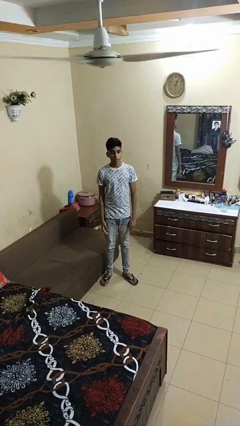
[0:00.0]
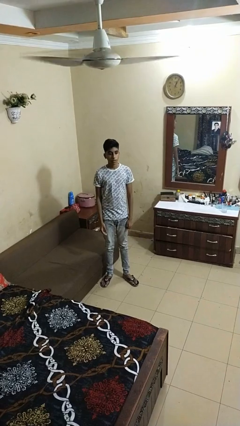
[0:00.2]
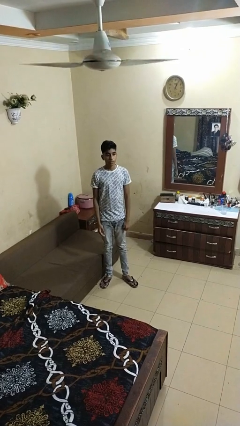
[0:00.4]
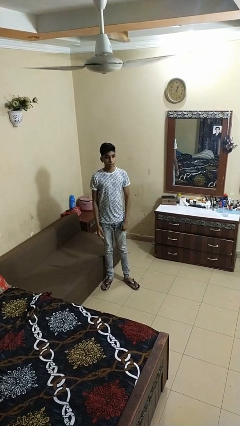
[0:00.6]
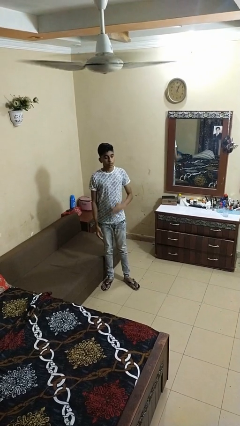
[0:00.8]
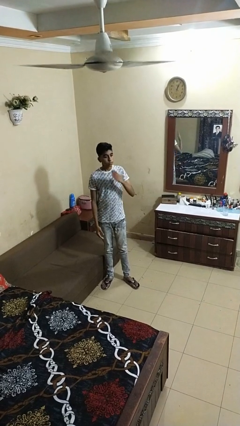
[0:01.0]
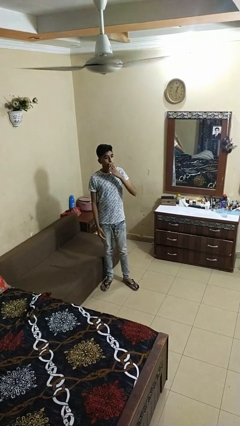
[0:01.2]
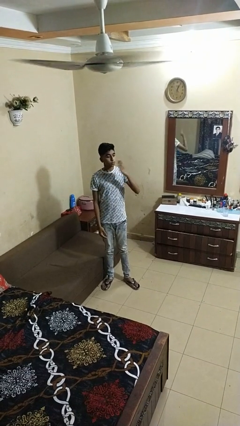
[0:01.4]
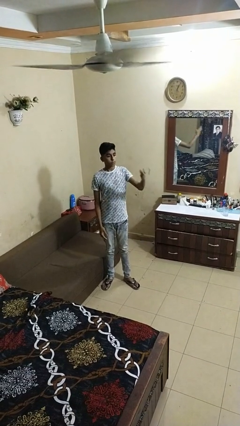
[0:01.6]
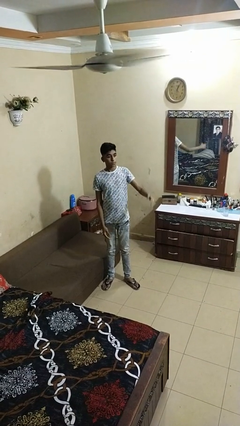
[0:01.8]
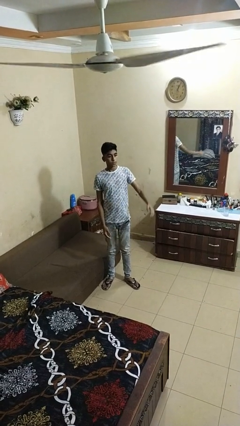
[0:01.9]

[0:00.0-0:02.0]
person gestures blow kiss

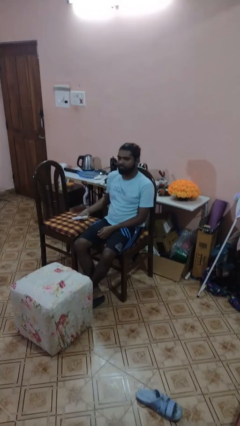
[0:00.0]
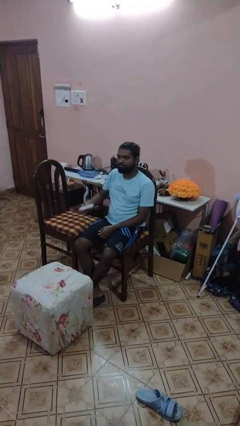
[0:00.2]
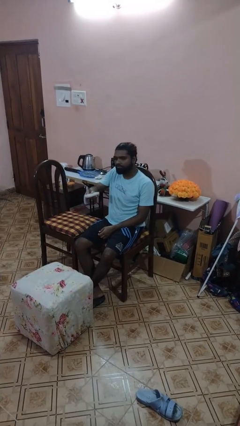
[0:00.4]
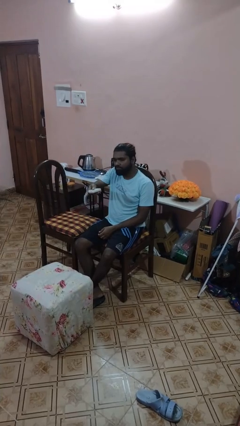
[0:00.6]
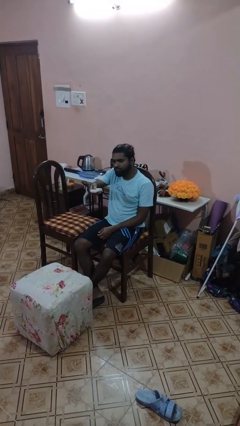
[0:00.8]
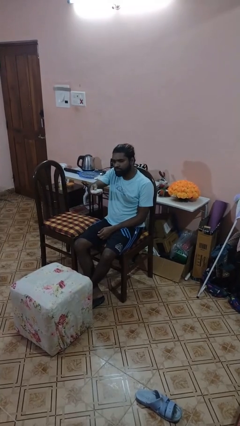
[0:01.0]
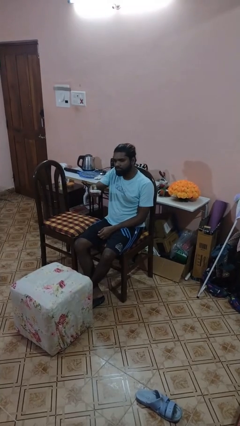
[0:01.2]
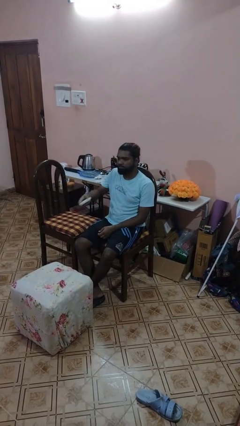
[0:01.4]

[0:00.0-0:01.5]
person uses television remote

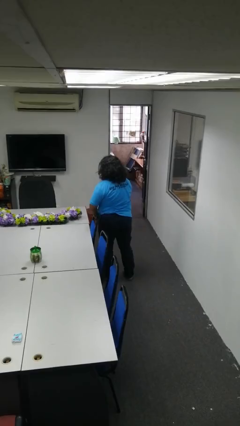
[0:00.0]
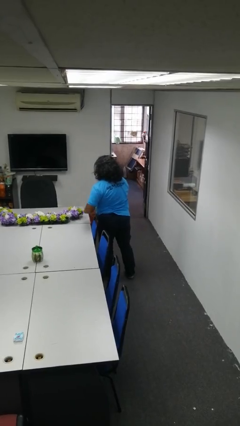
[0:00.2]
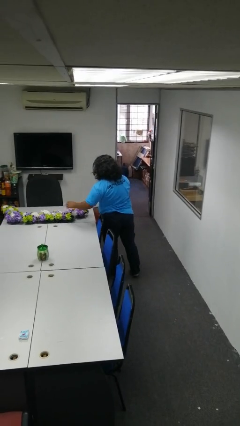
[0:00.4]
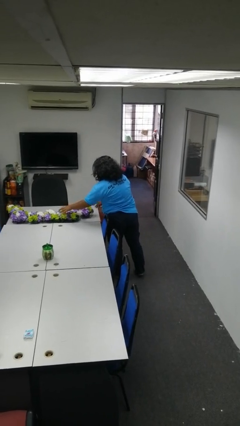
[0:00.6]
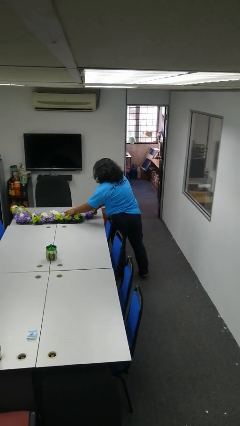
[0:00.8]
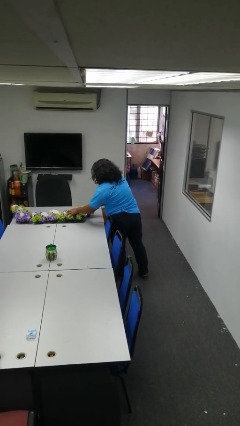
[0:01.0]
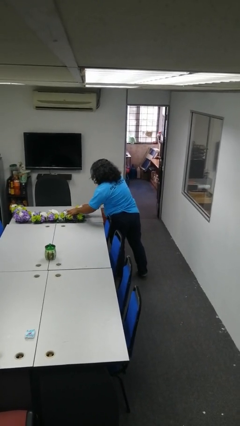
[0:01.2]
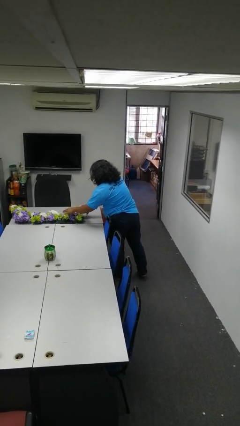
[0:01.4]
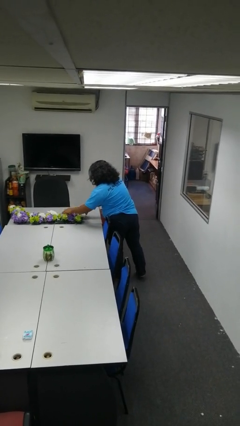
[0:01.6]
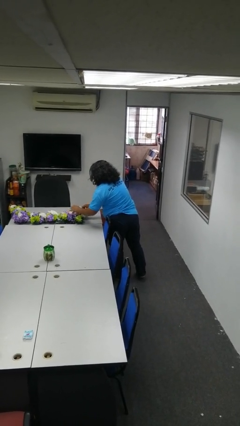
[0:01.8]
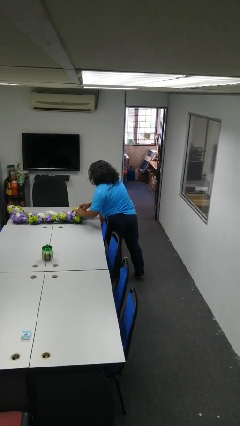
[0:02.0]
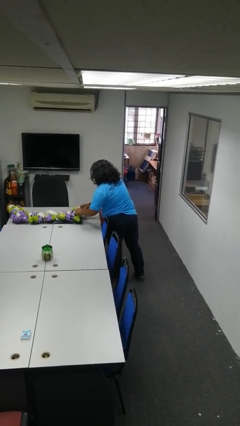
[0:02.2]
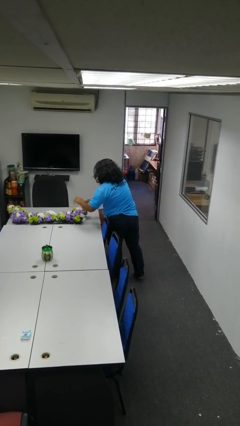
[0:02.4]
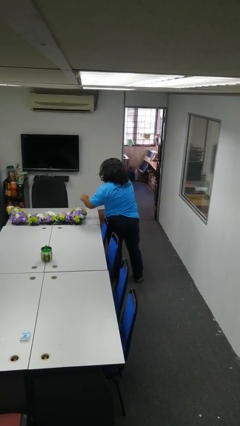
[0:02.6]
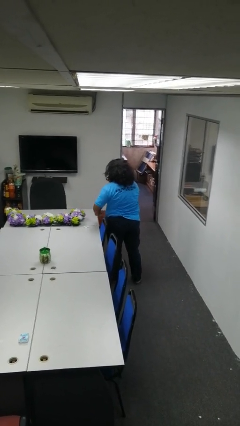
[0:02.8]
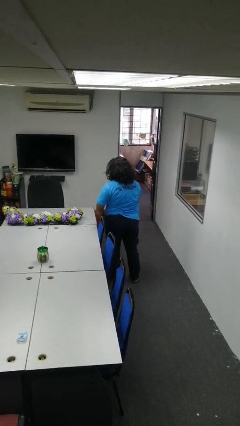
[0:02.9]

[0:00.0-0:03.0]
person arranges flowers in vase

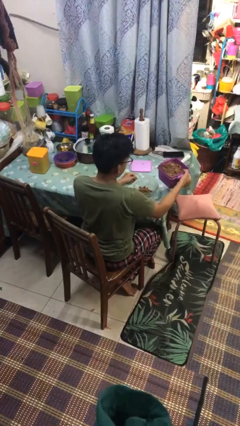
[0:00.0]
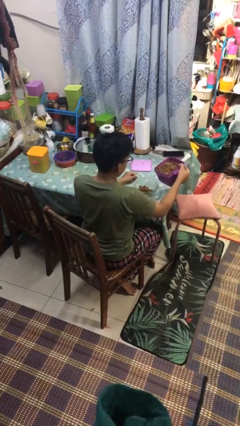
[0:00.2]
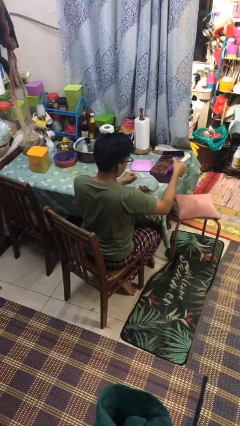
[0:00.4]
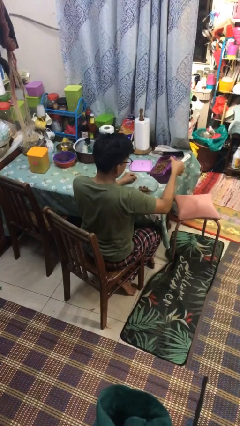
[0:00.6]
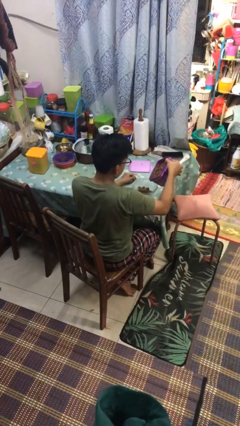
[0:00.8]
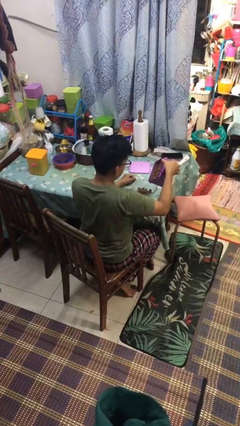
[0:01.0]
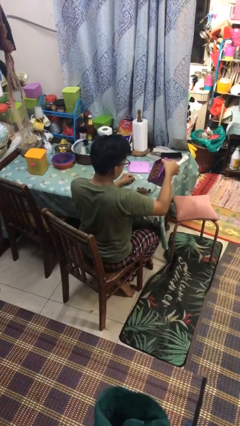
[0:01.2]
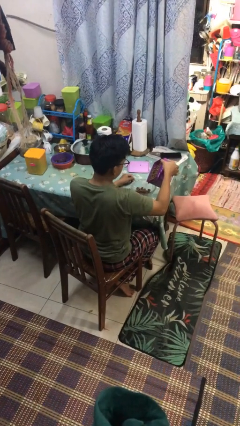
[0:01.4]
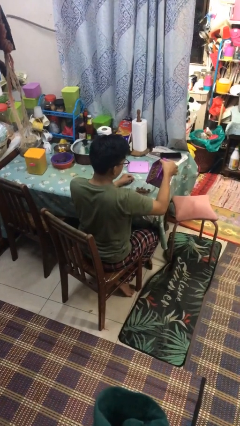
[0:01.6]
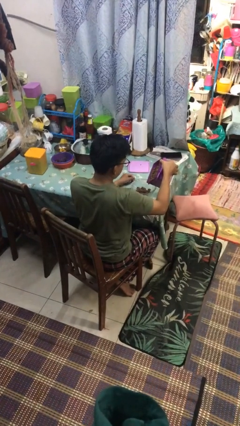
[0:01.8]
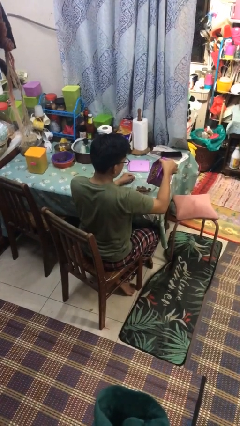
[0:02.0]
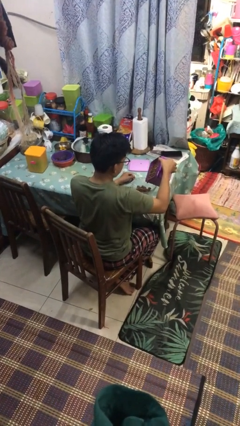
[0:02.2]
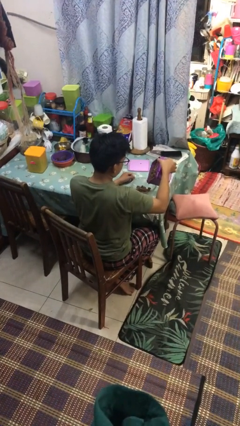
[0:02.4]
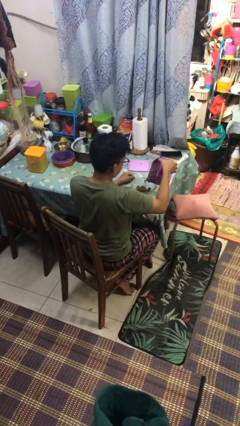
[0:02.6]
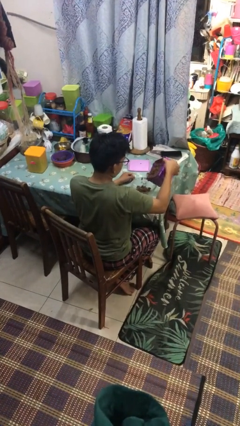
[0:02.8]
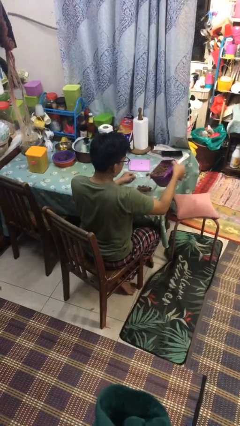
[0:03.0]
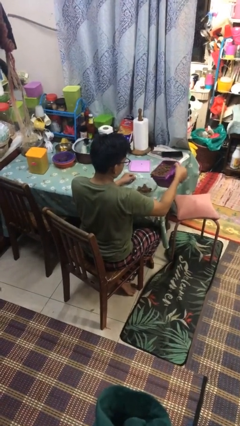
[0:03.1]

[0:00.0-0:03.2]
person pours into bowl

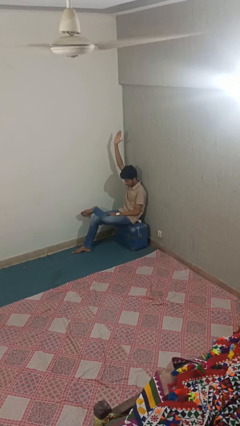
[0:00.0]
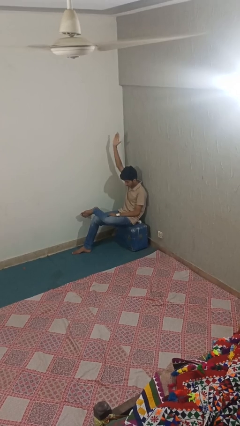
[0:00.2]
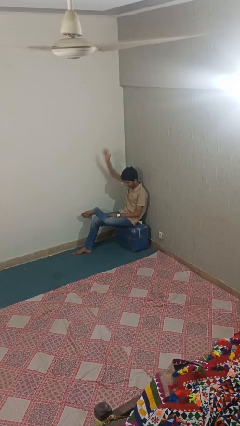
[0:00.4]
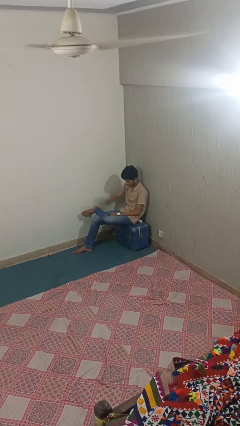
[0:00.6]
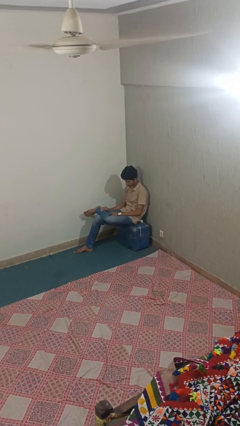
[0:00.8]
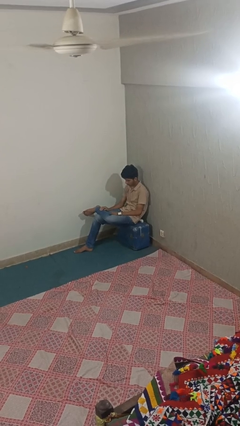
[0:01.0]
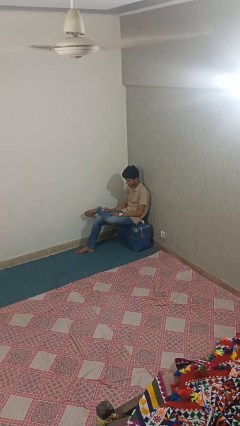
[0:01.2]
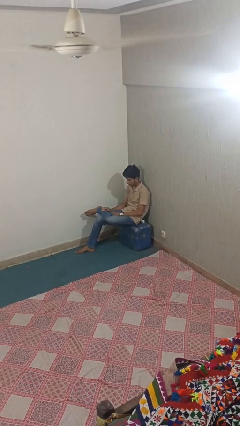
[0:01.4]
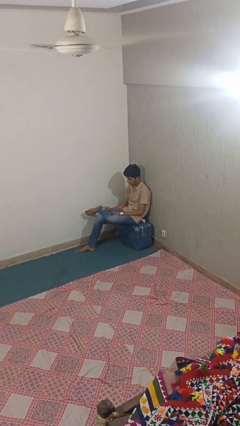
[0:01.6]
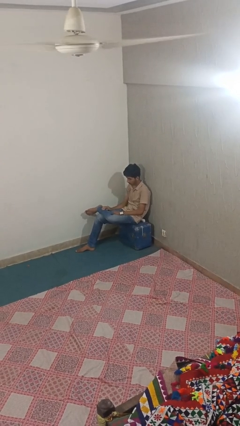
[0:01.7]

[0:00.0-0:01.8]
person gestures lower hand

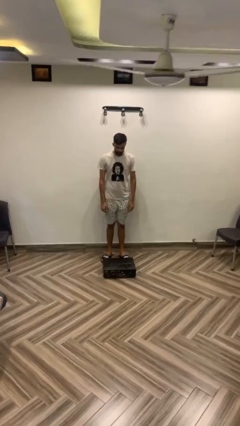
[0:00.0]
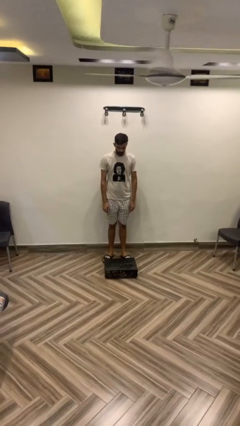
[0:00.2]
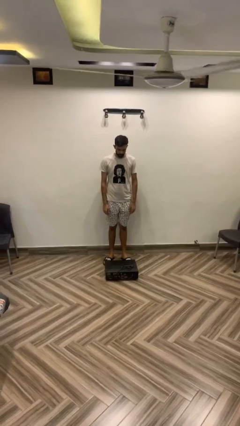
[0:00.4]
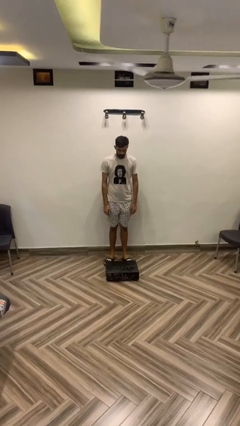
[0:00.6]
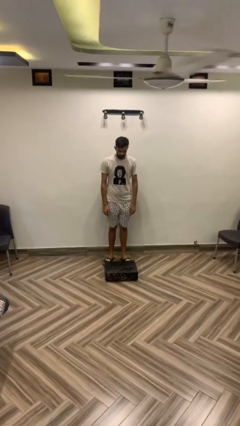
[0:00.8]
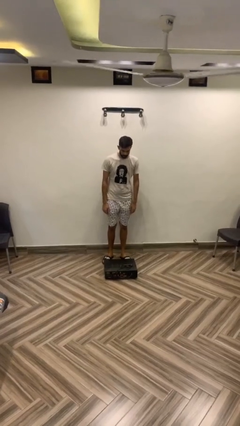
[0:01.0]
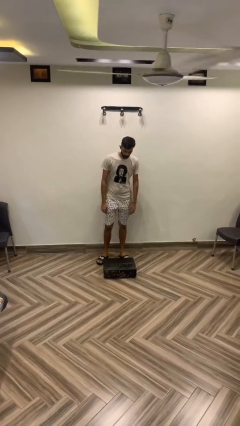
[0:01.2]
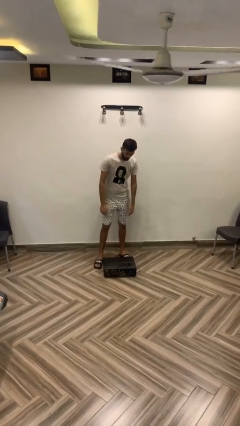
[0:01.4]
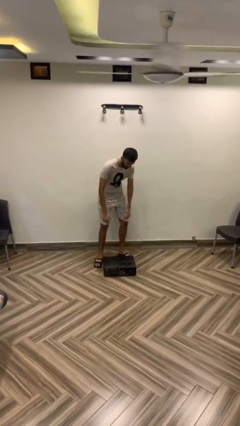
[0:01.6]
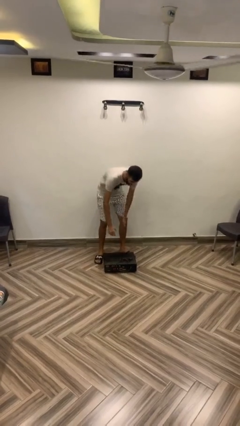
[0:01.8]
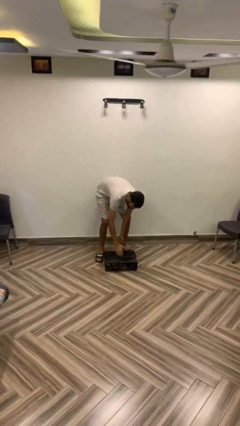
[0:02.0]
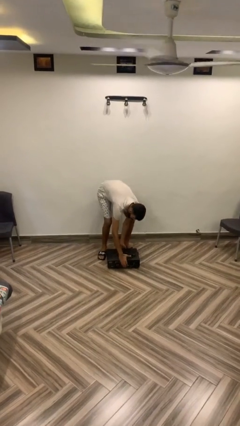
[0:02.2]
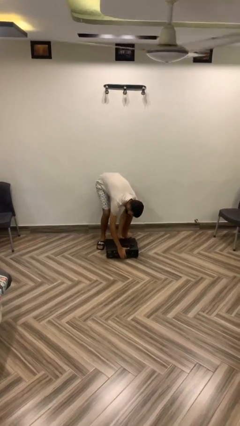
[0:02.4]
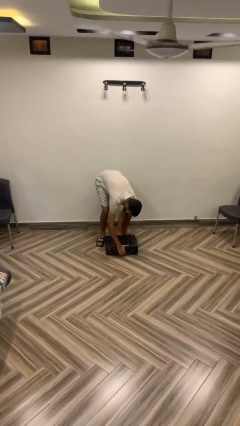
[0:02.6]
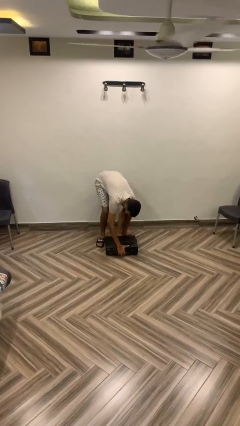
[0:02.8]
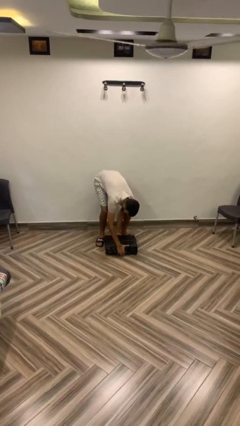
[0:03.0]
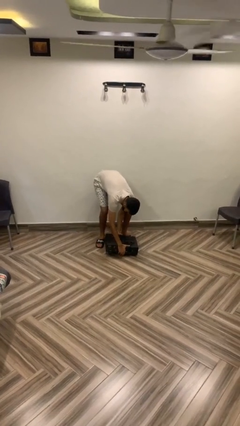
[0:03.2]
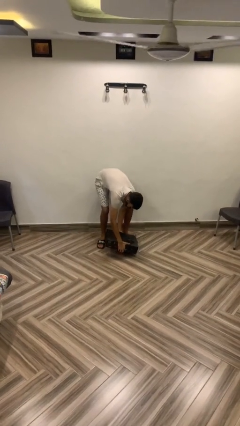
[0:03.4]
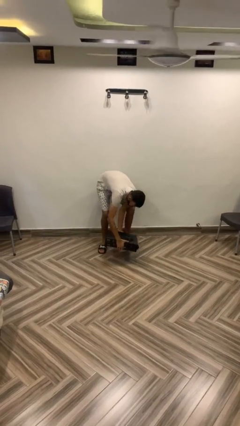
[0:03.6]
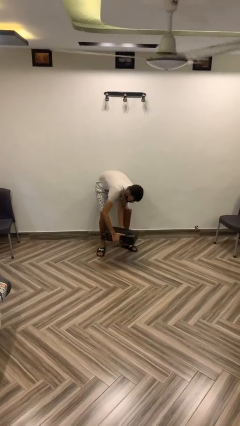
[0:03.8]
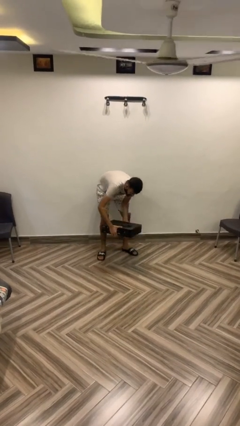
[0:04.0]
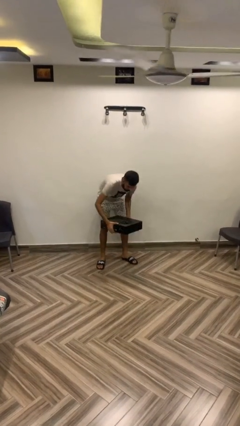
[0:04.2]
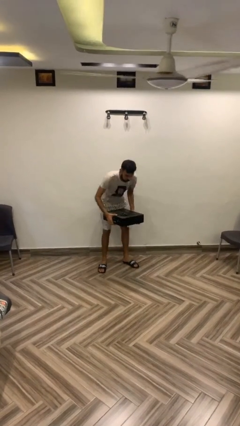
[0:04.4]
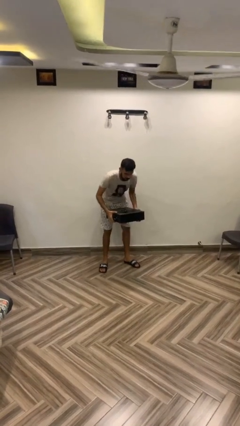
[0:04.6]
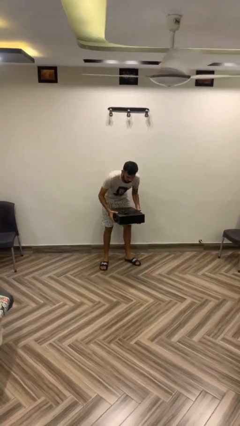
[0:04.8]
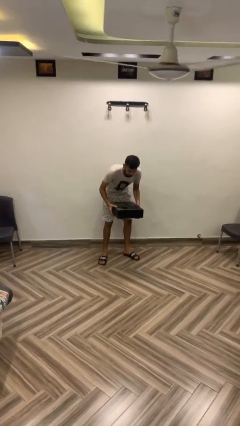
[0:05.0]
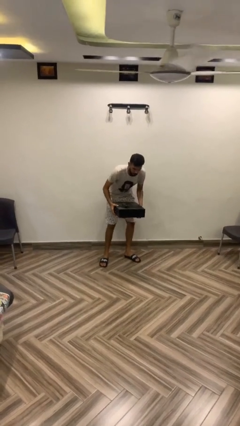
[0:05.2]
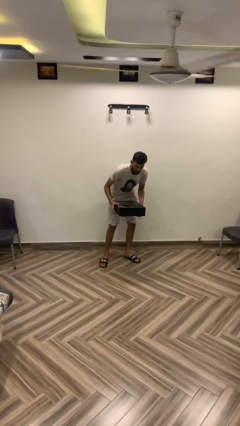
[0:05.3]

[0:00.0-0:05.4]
person picks up object from floor

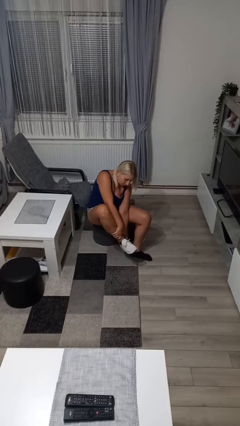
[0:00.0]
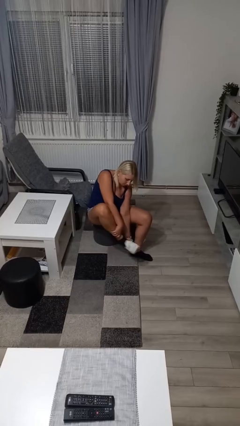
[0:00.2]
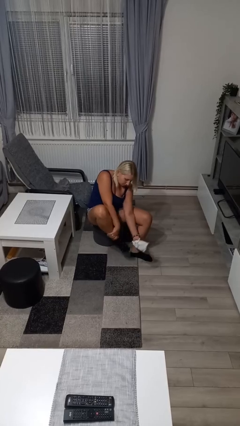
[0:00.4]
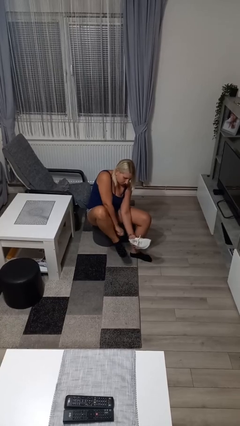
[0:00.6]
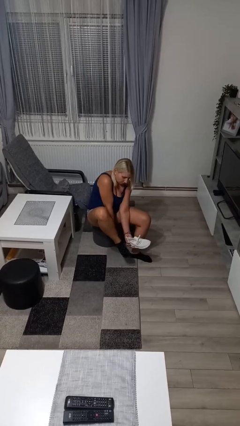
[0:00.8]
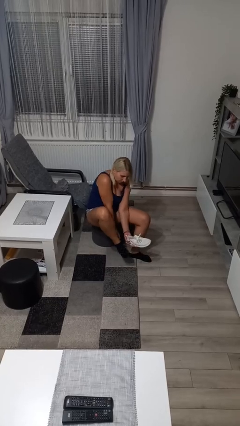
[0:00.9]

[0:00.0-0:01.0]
person takes off shoes
